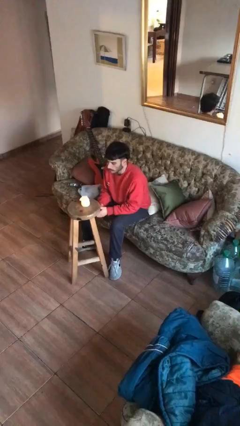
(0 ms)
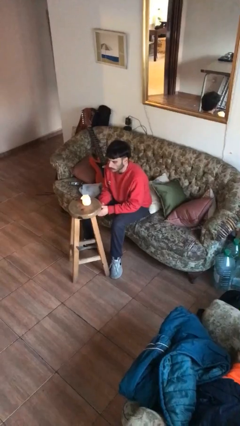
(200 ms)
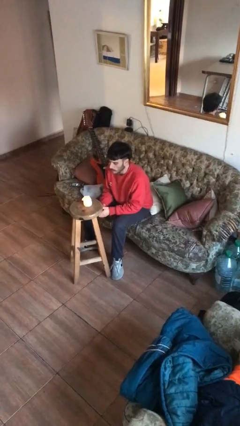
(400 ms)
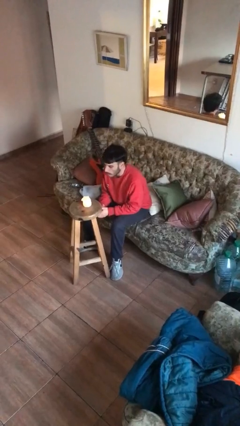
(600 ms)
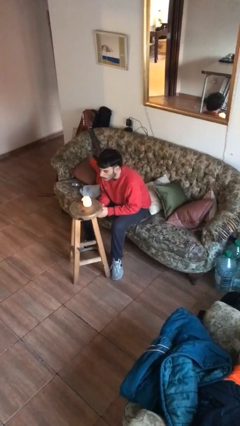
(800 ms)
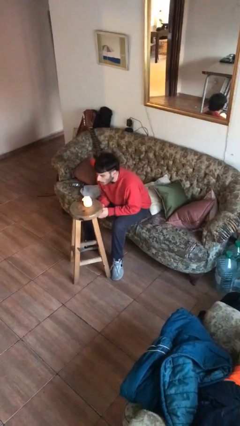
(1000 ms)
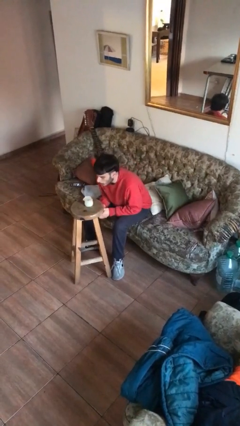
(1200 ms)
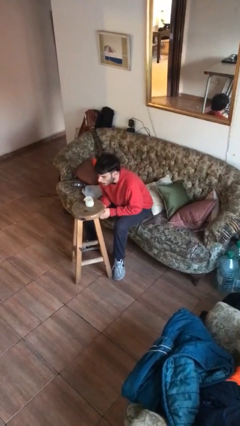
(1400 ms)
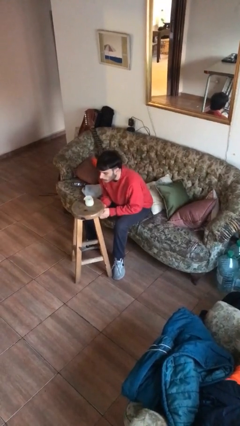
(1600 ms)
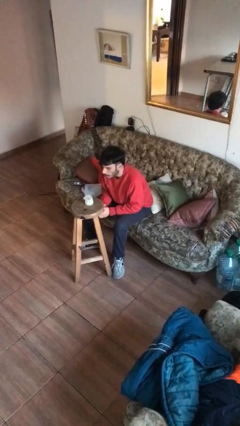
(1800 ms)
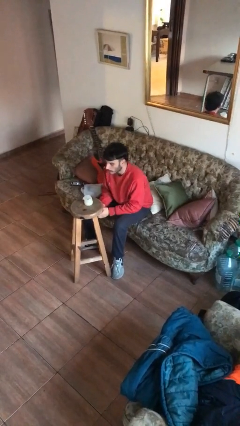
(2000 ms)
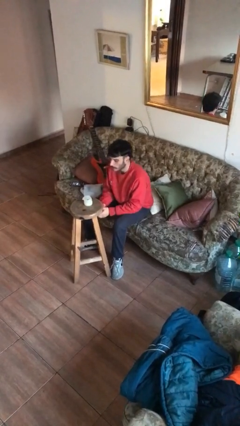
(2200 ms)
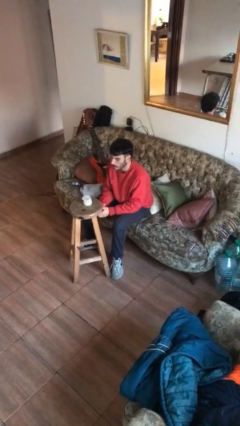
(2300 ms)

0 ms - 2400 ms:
person extinguishes candle

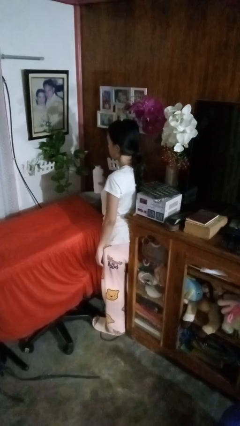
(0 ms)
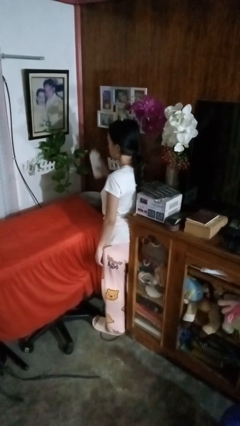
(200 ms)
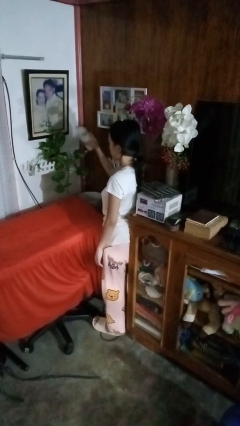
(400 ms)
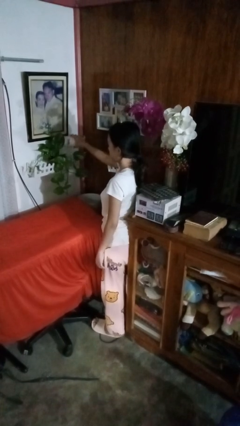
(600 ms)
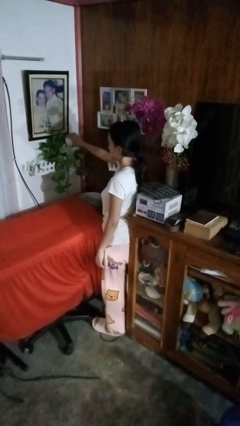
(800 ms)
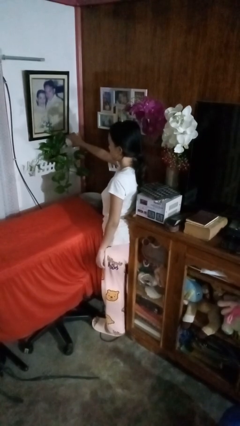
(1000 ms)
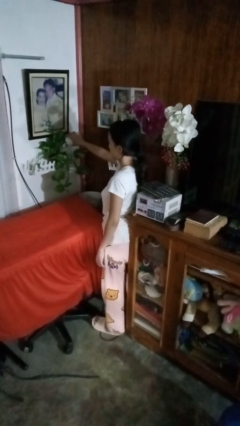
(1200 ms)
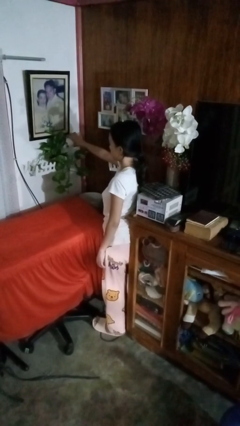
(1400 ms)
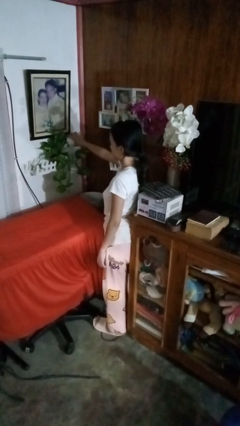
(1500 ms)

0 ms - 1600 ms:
person waters houseplant

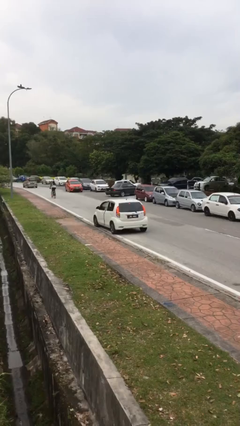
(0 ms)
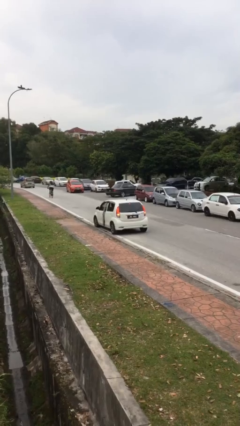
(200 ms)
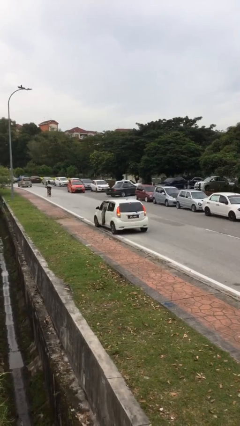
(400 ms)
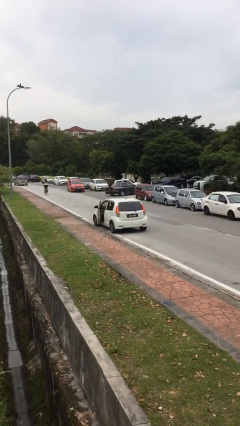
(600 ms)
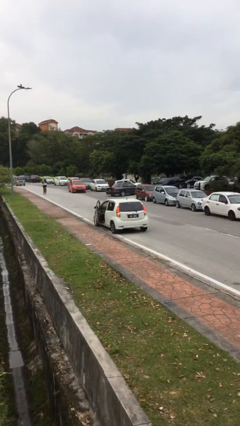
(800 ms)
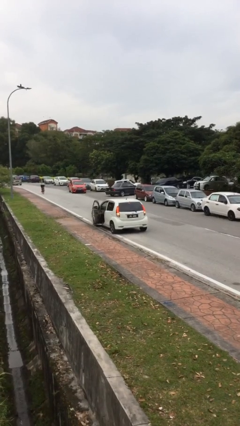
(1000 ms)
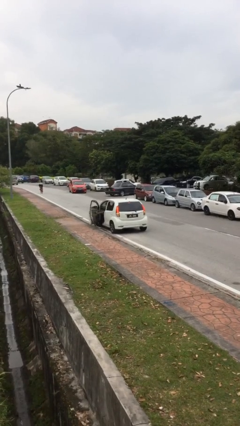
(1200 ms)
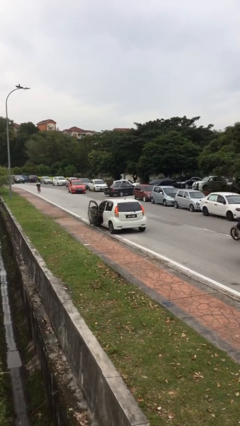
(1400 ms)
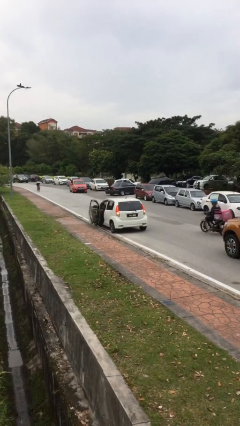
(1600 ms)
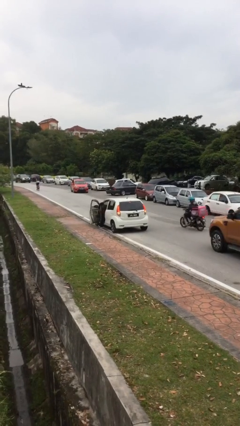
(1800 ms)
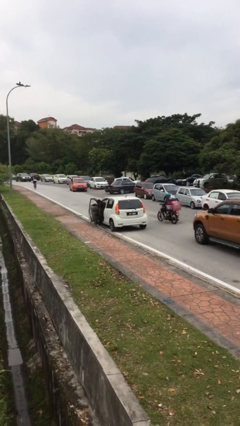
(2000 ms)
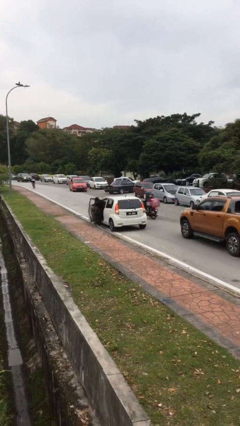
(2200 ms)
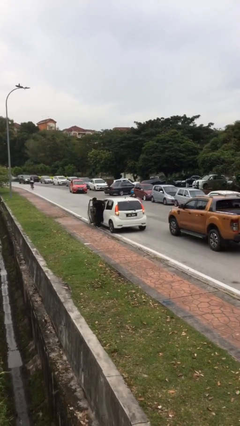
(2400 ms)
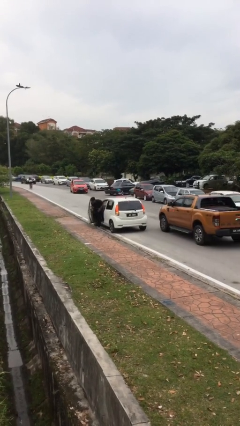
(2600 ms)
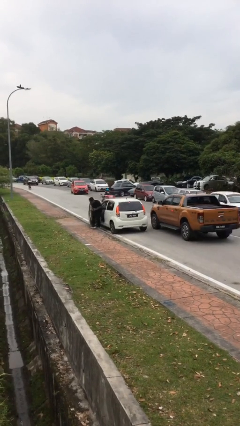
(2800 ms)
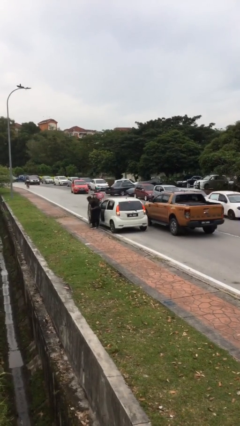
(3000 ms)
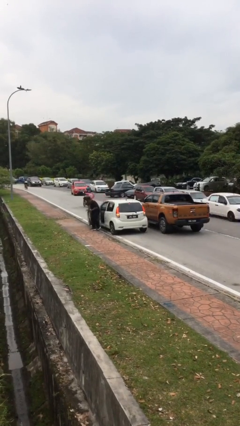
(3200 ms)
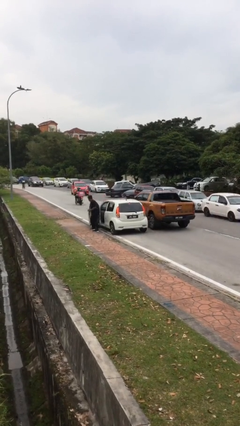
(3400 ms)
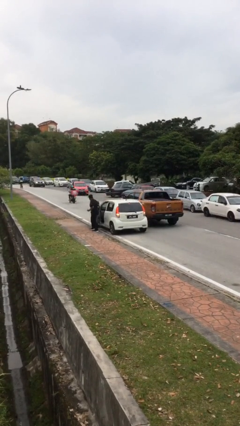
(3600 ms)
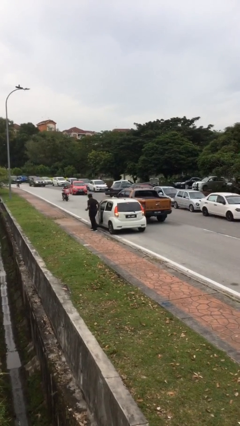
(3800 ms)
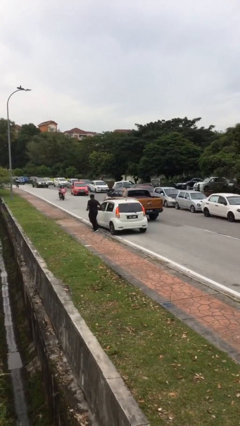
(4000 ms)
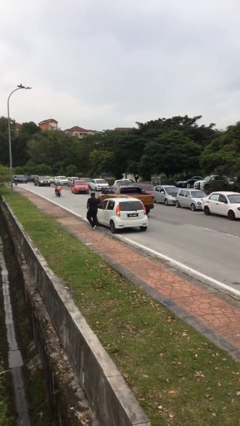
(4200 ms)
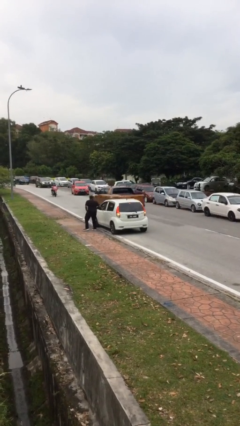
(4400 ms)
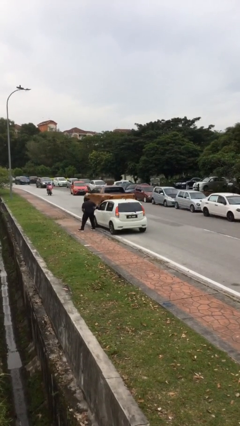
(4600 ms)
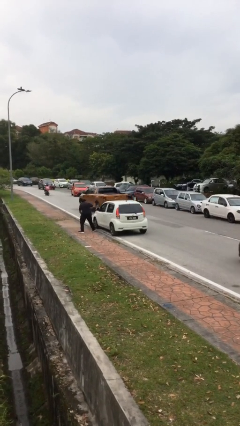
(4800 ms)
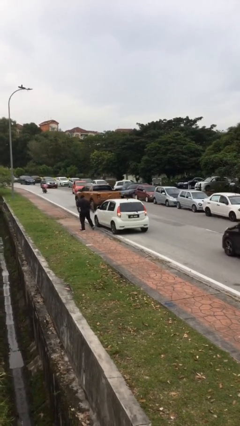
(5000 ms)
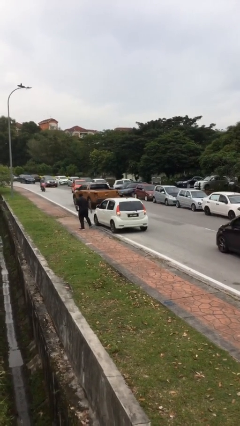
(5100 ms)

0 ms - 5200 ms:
car drops off person

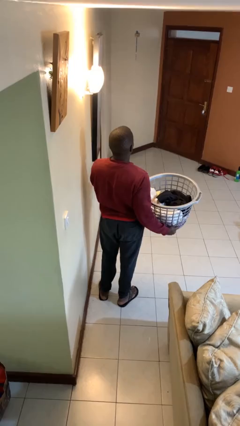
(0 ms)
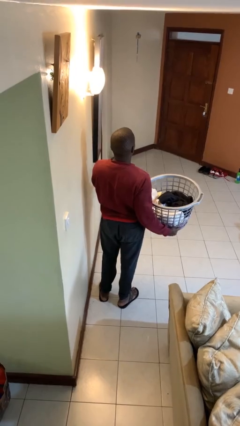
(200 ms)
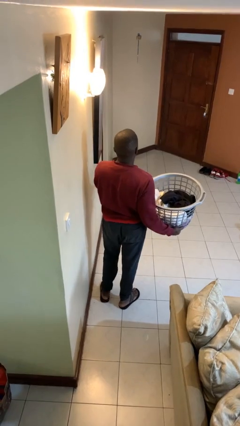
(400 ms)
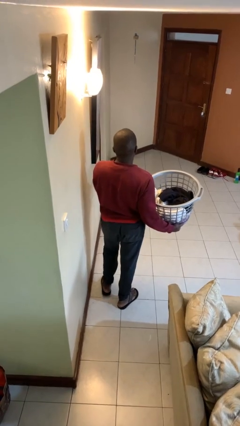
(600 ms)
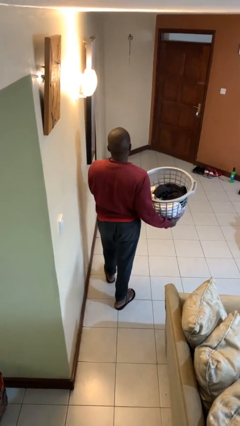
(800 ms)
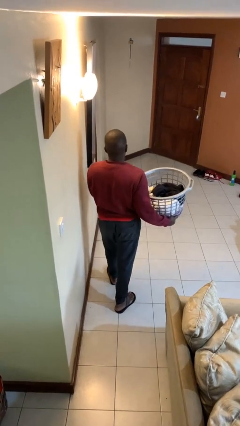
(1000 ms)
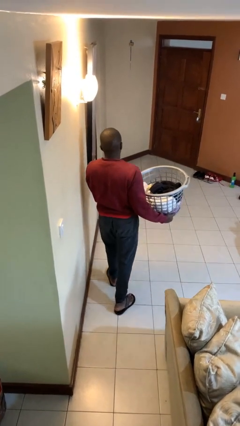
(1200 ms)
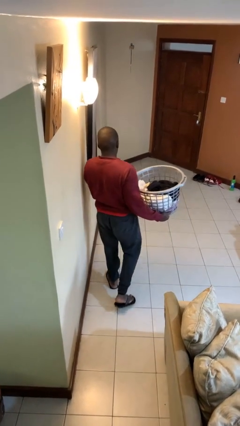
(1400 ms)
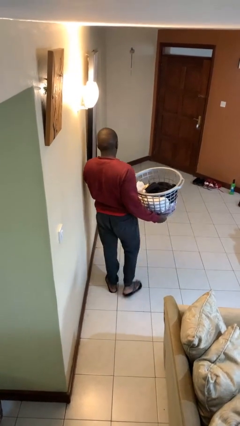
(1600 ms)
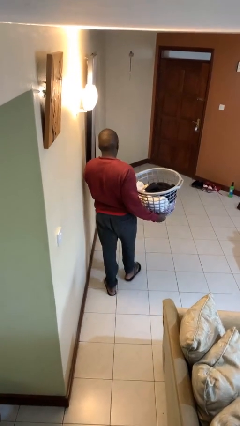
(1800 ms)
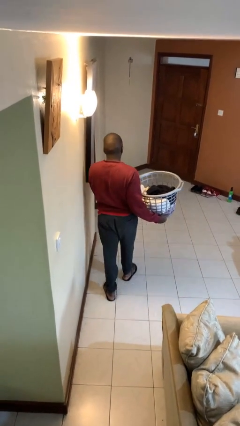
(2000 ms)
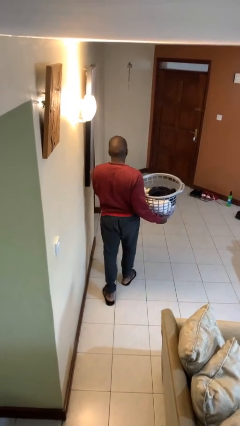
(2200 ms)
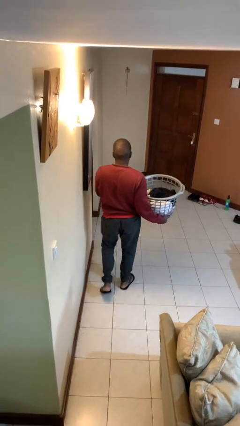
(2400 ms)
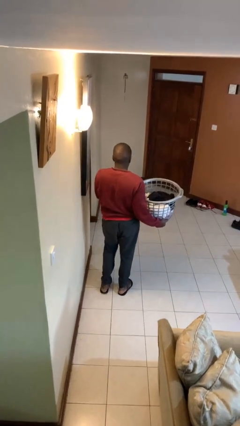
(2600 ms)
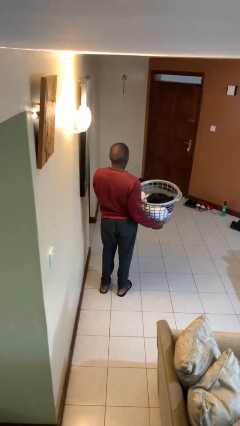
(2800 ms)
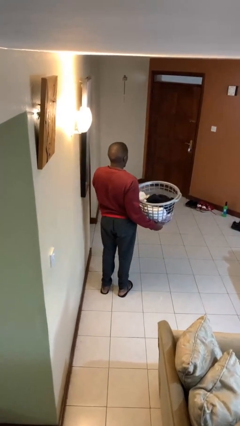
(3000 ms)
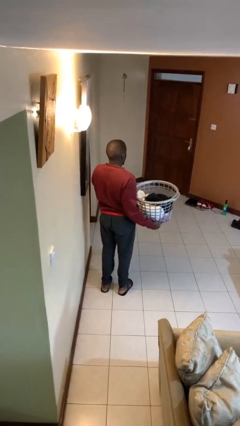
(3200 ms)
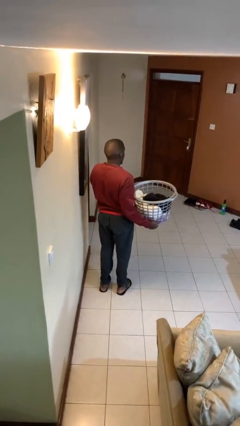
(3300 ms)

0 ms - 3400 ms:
person carries laundry basket

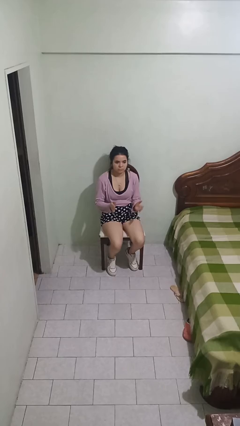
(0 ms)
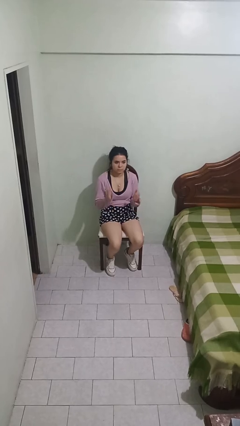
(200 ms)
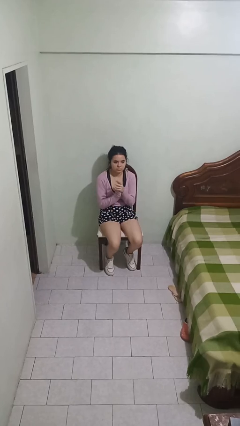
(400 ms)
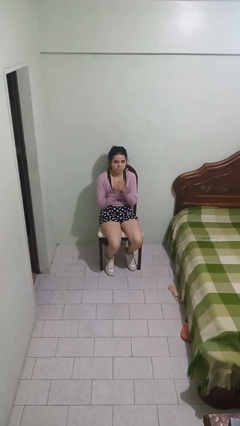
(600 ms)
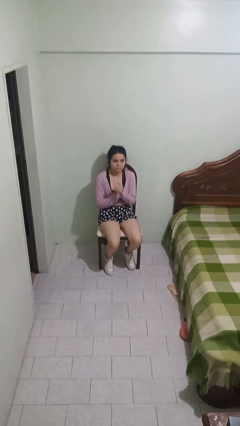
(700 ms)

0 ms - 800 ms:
person claps hands

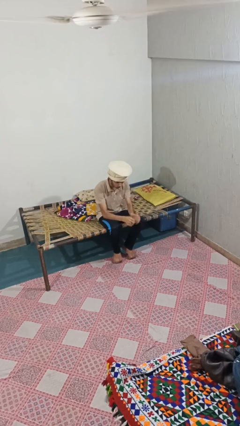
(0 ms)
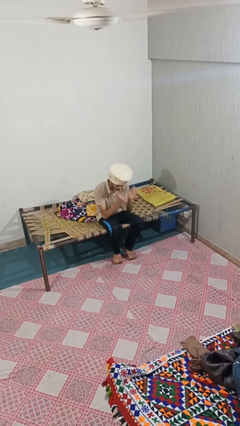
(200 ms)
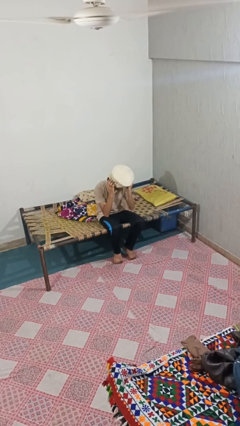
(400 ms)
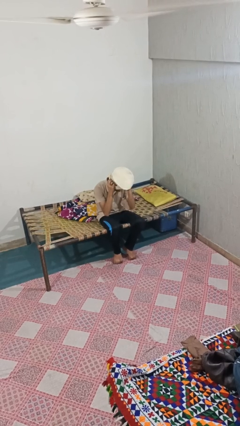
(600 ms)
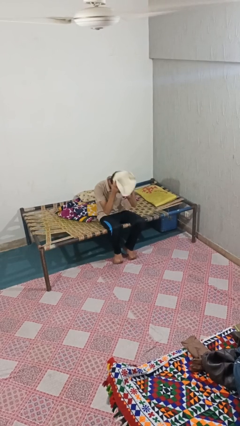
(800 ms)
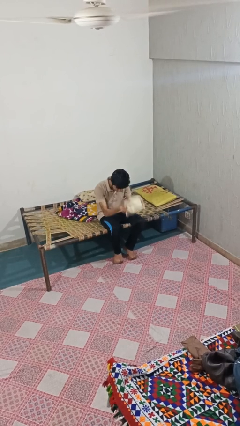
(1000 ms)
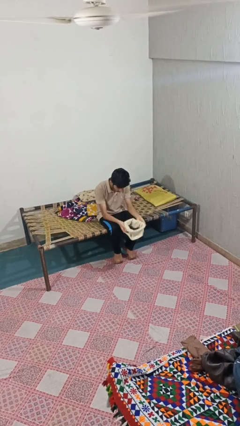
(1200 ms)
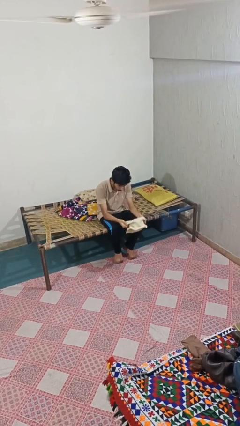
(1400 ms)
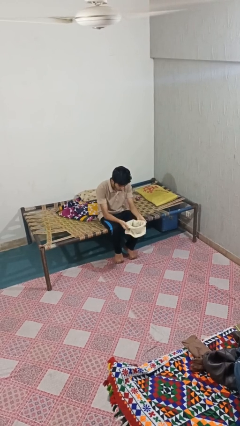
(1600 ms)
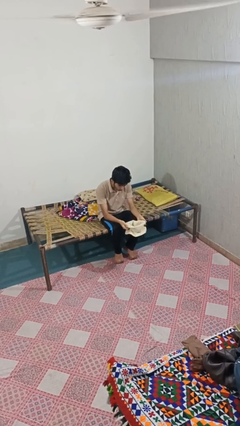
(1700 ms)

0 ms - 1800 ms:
person takes off hat

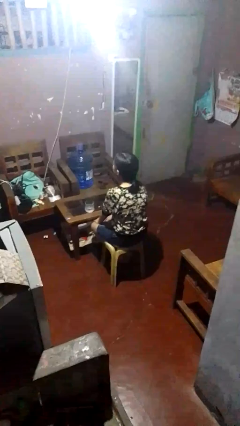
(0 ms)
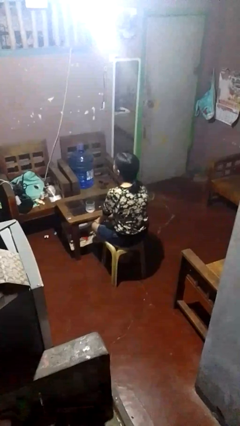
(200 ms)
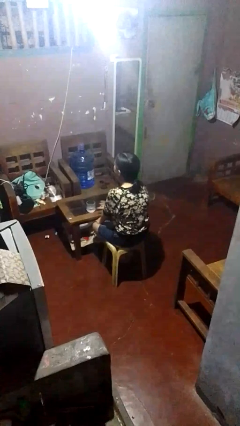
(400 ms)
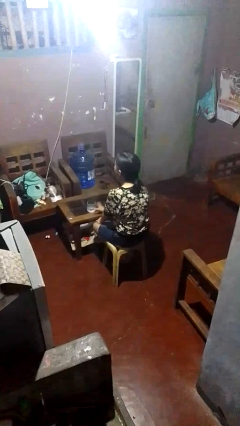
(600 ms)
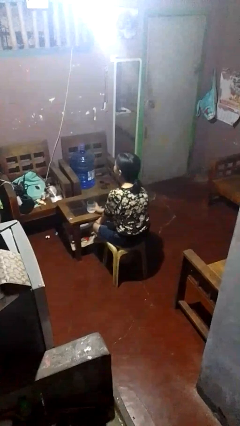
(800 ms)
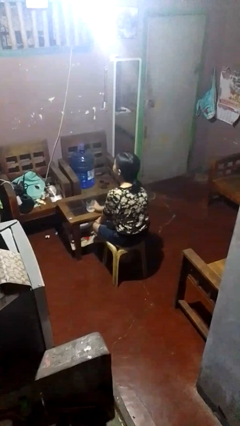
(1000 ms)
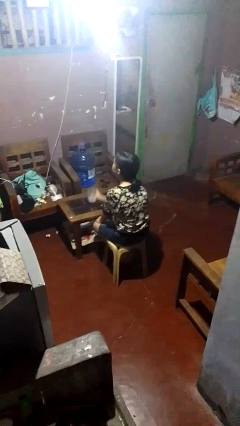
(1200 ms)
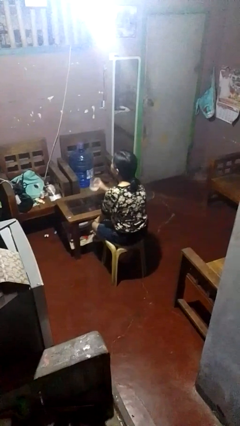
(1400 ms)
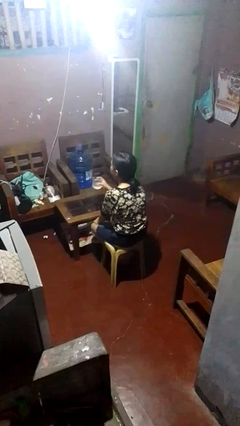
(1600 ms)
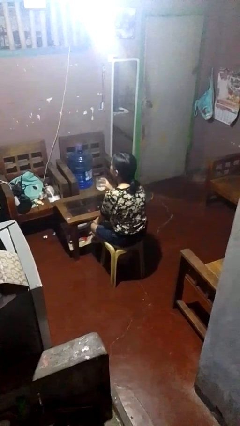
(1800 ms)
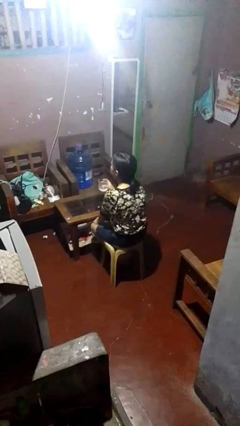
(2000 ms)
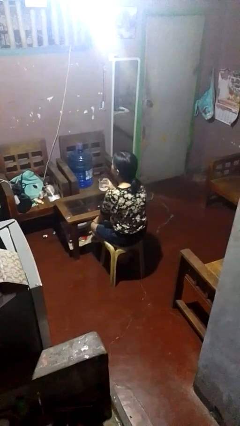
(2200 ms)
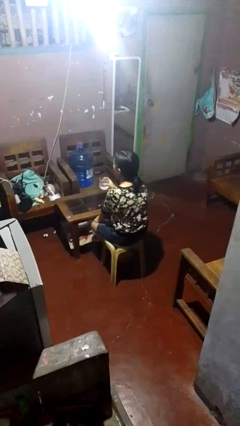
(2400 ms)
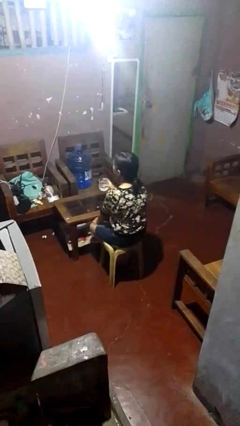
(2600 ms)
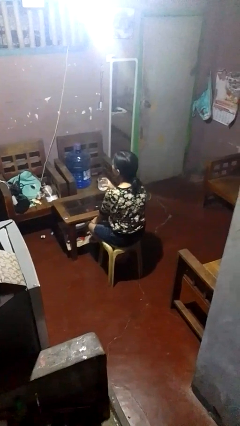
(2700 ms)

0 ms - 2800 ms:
person picks up object from table
